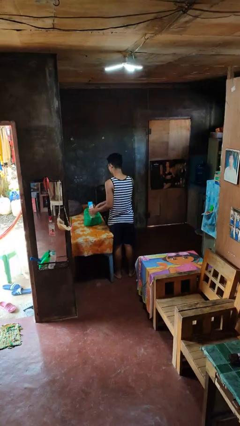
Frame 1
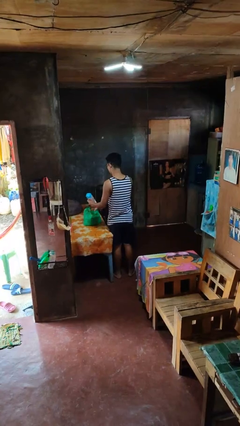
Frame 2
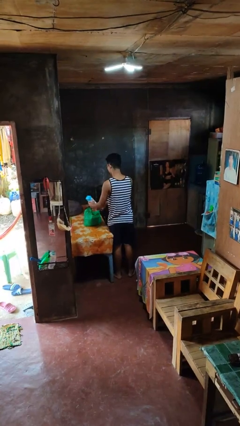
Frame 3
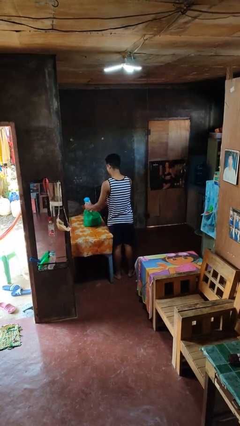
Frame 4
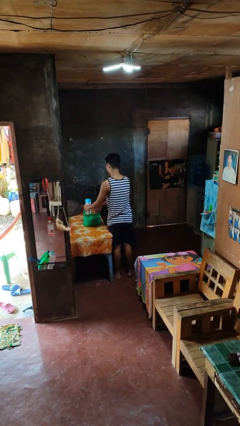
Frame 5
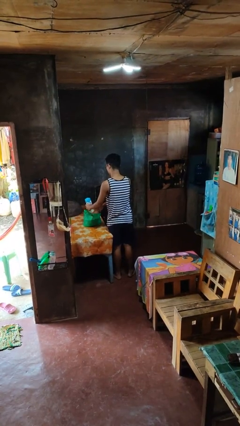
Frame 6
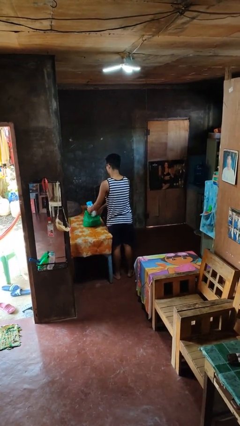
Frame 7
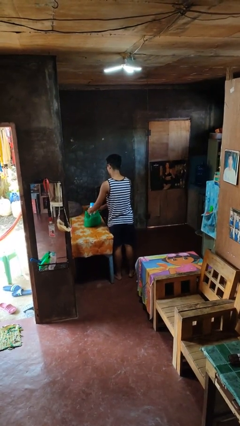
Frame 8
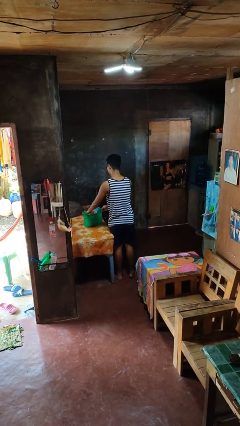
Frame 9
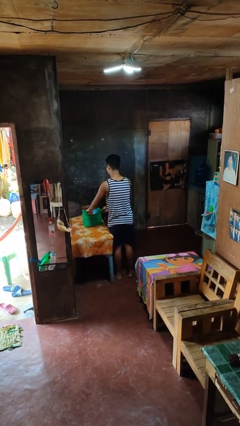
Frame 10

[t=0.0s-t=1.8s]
person puts object into bag

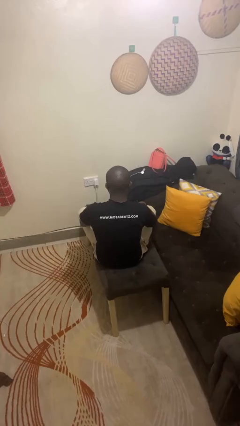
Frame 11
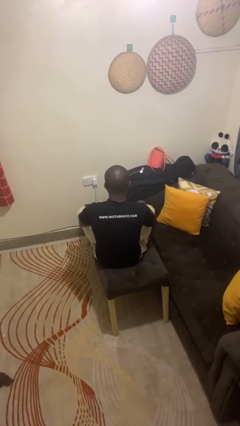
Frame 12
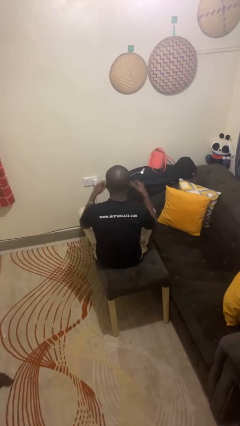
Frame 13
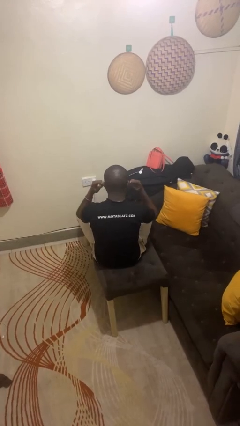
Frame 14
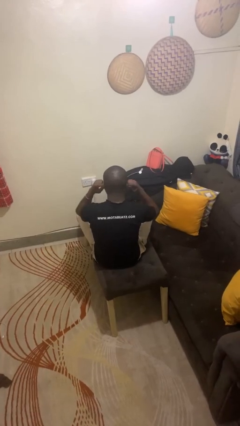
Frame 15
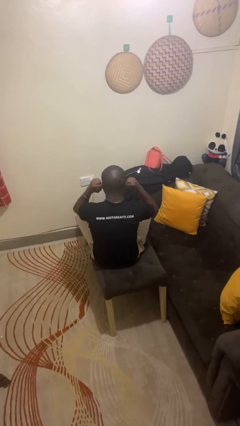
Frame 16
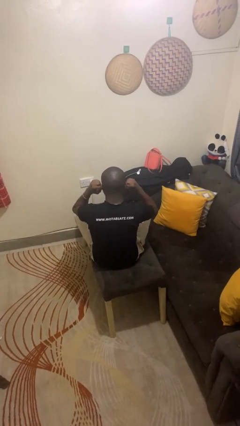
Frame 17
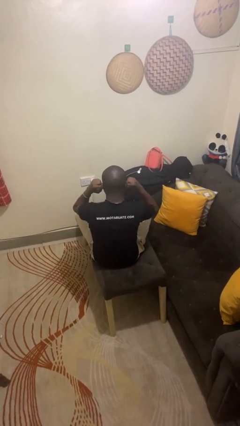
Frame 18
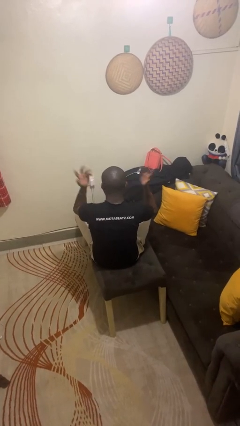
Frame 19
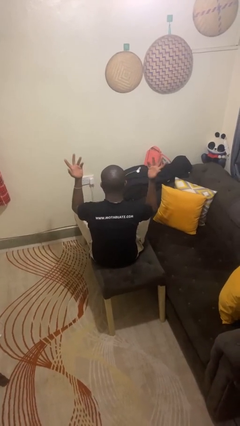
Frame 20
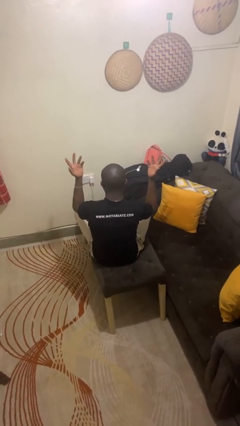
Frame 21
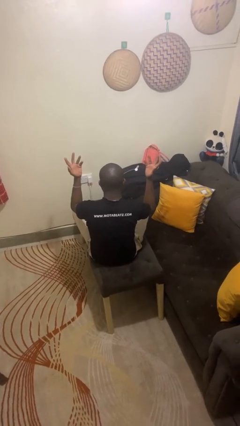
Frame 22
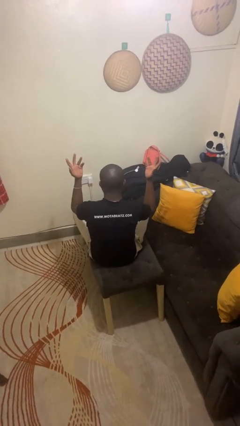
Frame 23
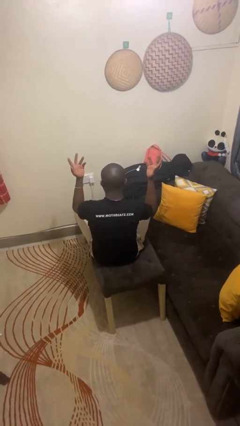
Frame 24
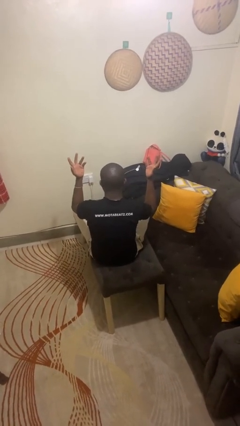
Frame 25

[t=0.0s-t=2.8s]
person puts fingers in ear

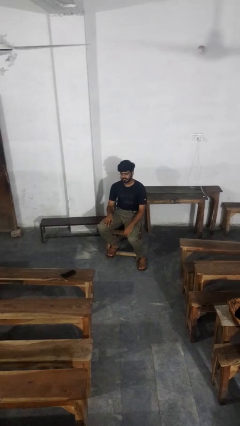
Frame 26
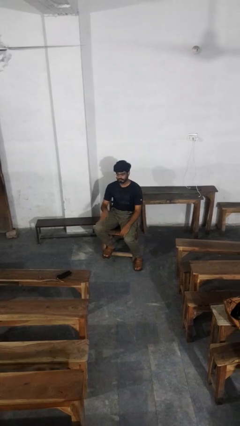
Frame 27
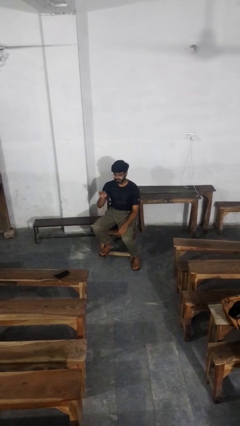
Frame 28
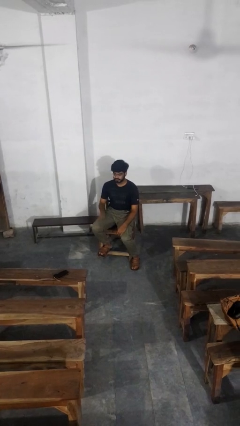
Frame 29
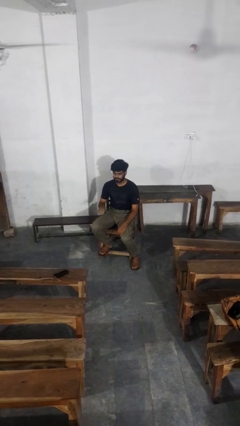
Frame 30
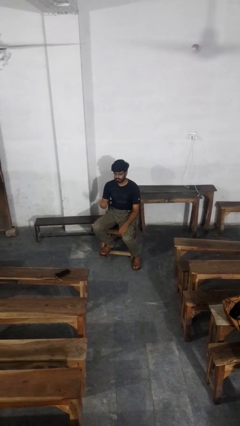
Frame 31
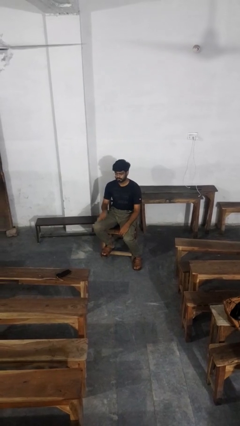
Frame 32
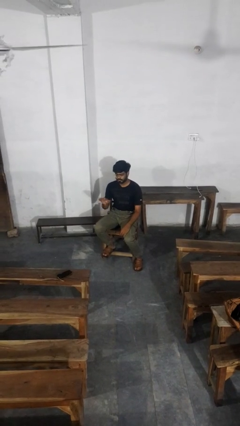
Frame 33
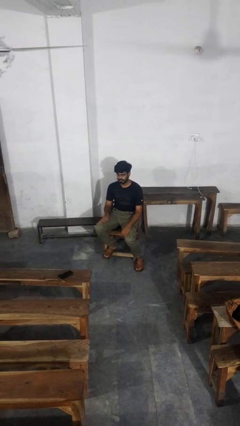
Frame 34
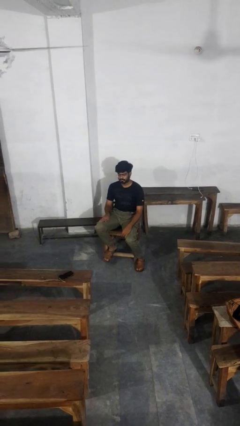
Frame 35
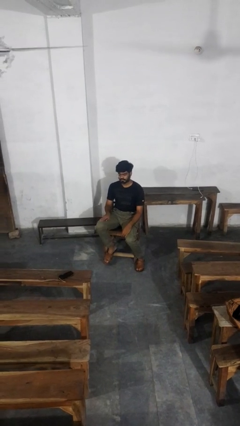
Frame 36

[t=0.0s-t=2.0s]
person slaps hands on thighs

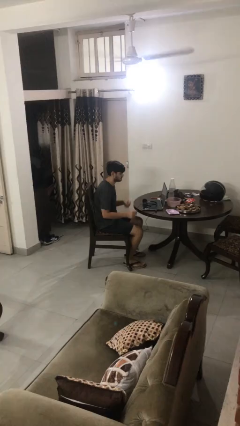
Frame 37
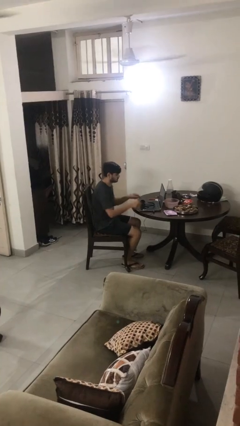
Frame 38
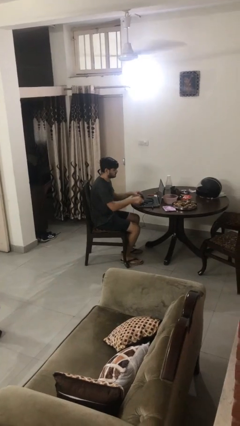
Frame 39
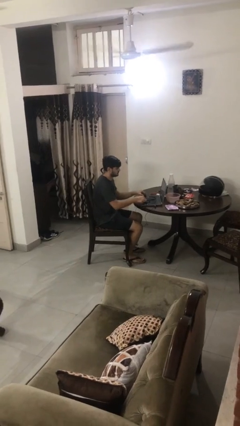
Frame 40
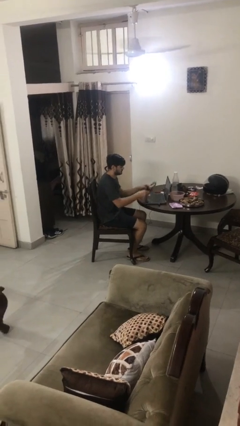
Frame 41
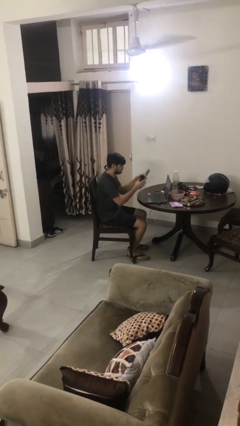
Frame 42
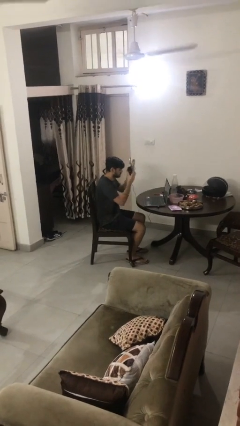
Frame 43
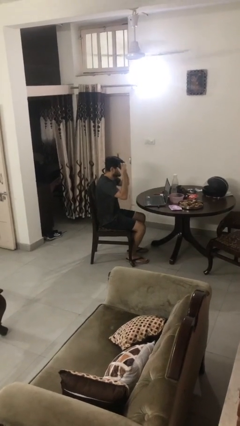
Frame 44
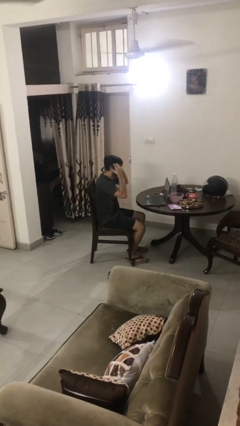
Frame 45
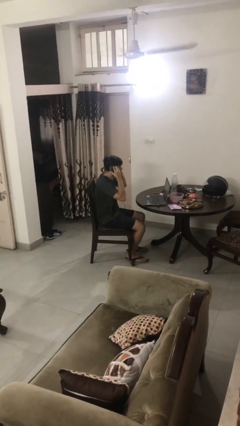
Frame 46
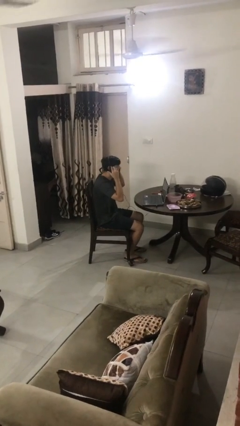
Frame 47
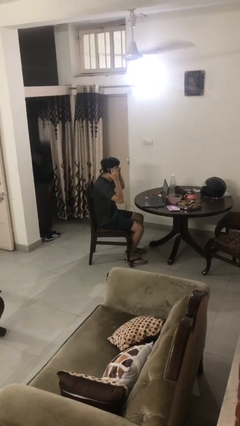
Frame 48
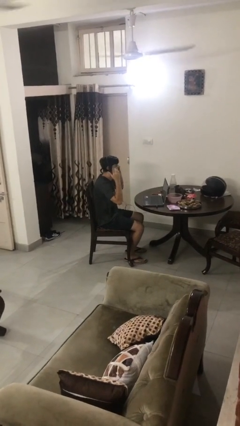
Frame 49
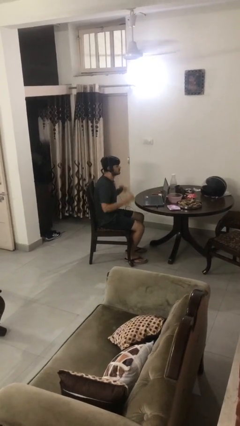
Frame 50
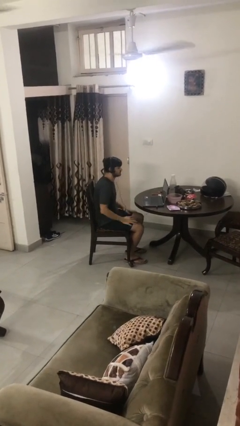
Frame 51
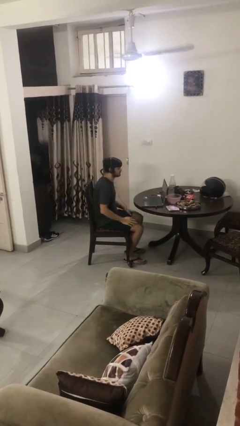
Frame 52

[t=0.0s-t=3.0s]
person puts on headphones

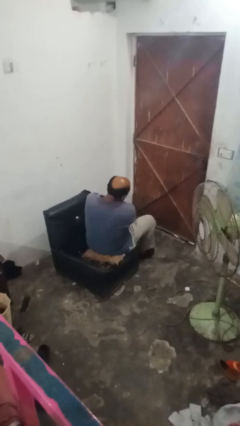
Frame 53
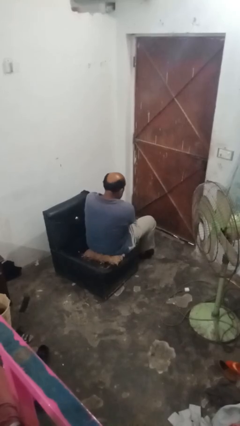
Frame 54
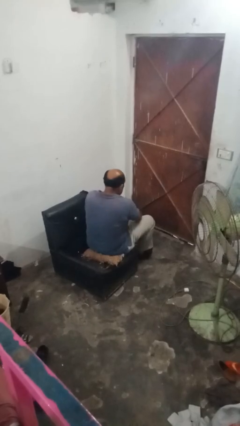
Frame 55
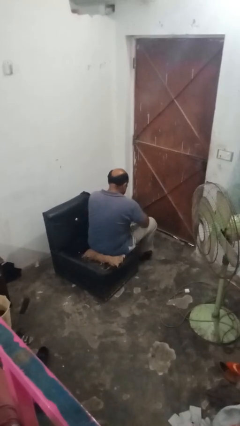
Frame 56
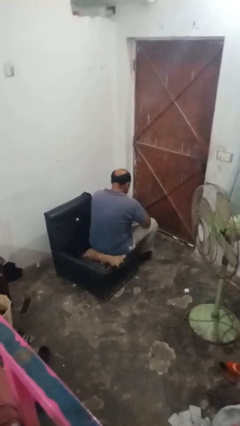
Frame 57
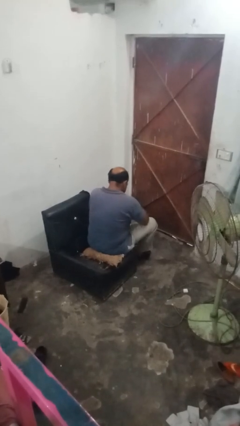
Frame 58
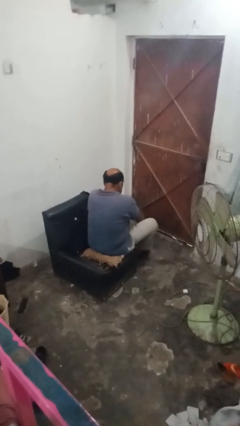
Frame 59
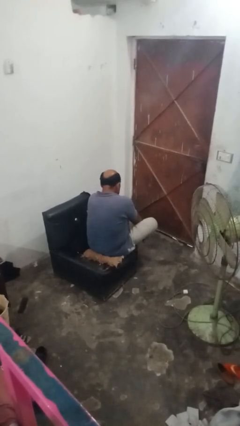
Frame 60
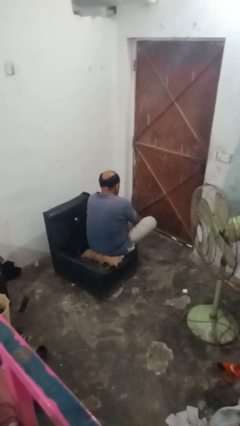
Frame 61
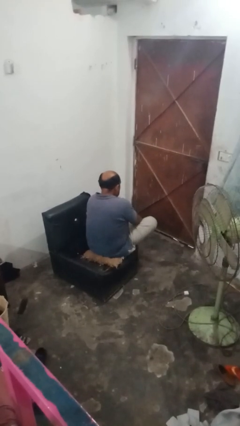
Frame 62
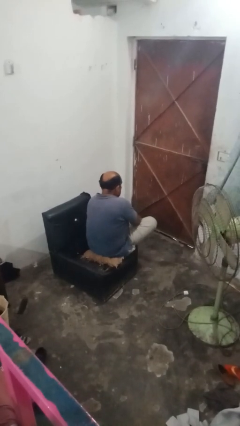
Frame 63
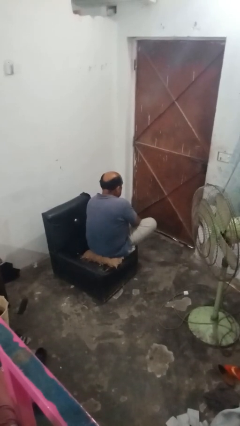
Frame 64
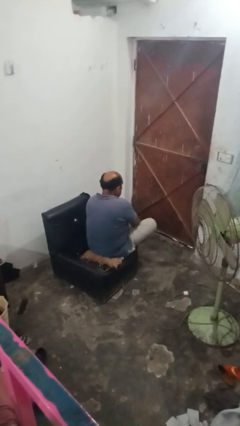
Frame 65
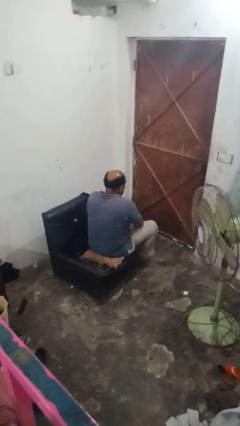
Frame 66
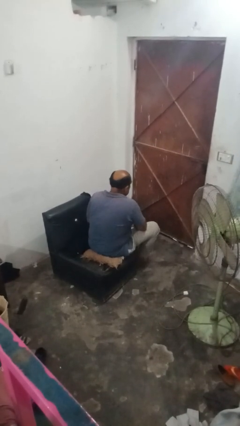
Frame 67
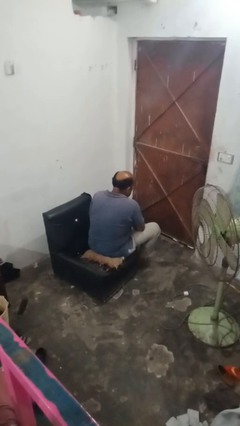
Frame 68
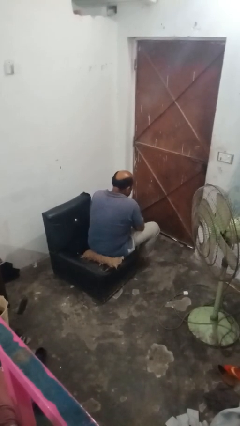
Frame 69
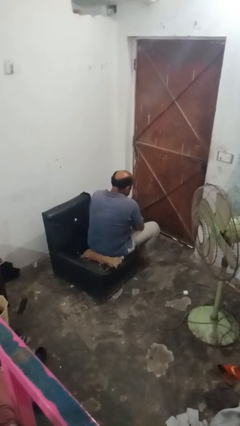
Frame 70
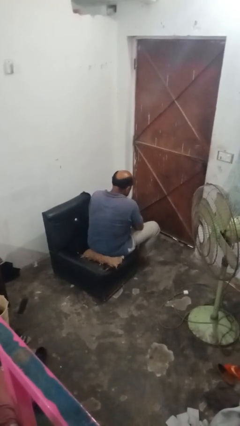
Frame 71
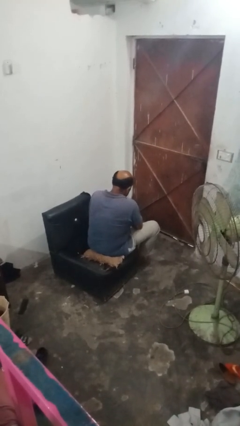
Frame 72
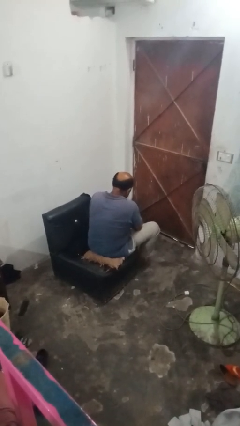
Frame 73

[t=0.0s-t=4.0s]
person takes off socks

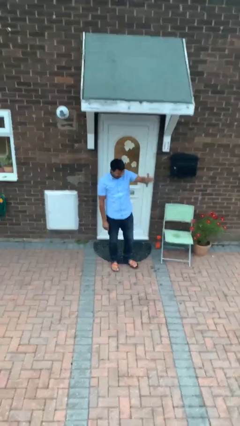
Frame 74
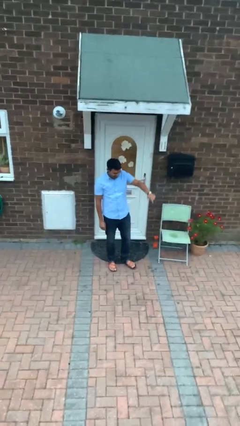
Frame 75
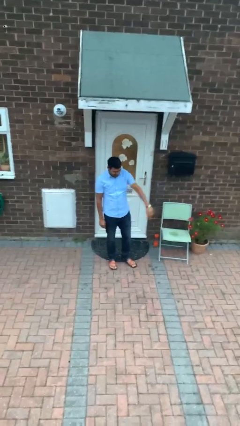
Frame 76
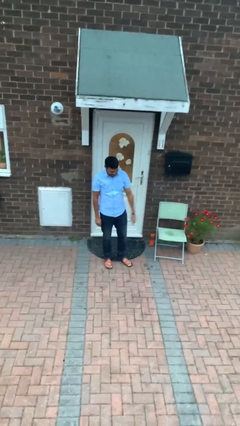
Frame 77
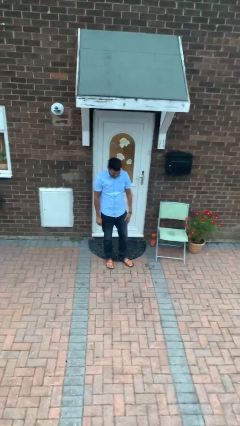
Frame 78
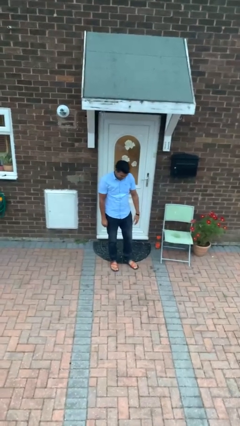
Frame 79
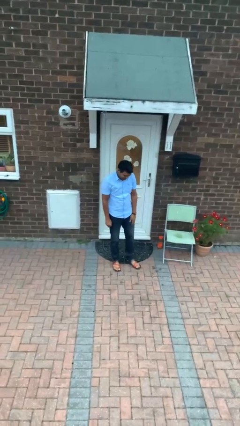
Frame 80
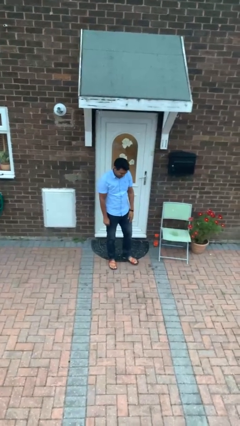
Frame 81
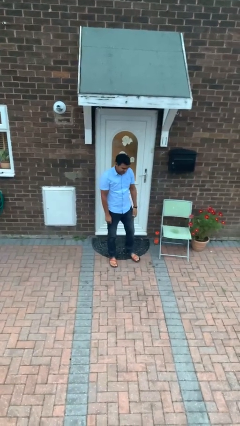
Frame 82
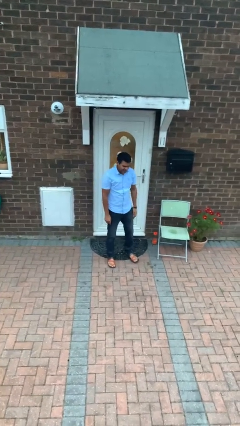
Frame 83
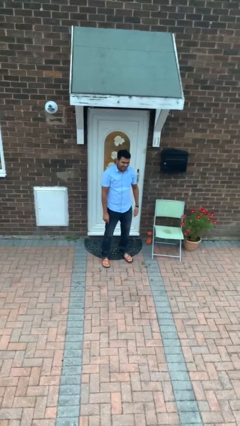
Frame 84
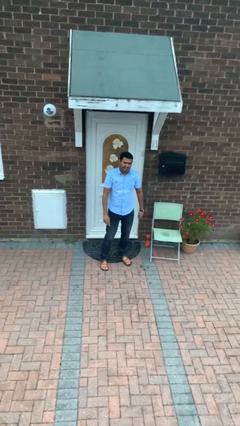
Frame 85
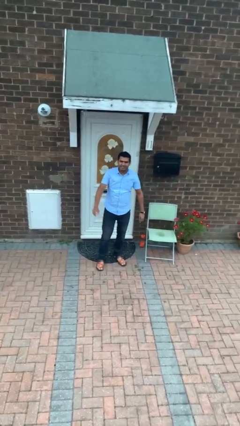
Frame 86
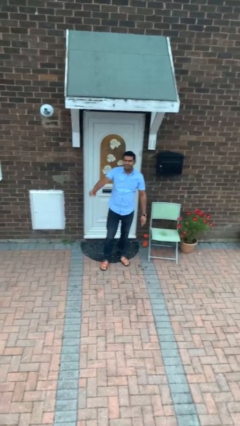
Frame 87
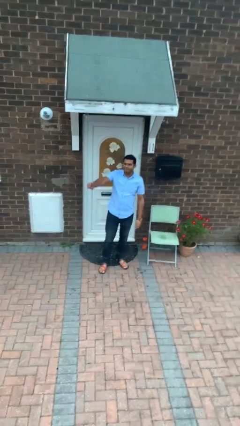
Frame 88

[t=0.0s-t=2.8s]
person gestures lower hand

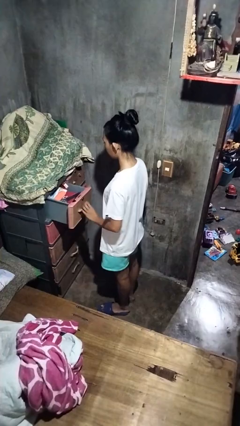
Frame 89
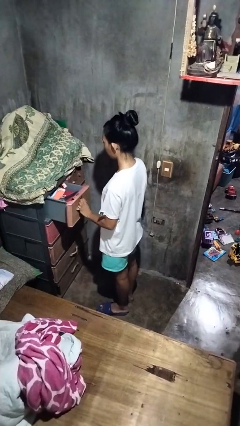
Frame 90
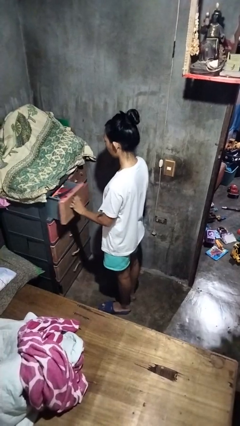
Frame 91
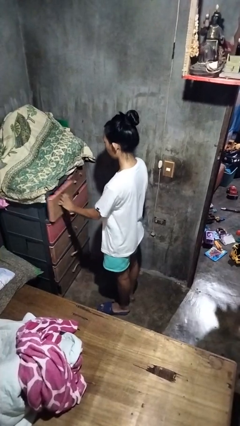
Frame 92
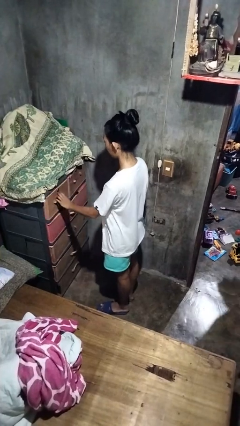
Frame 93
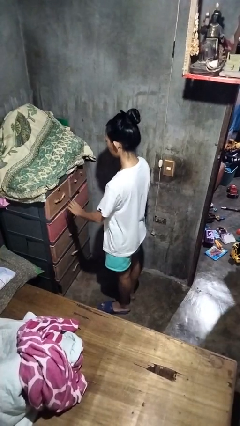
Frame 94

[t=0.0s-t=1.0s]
person closes dresser drawer
